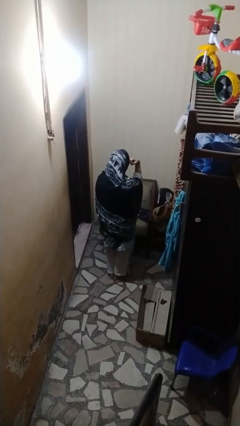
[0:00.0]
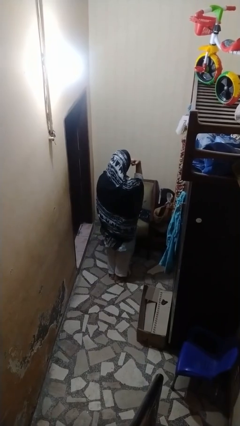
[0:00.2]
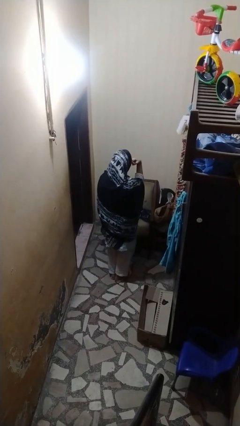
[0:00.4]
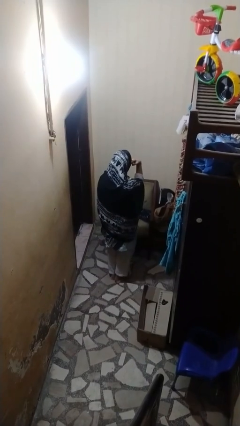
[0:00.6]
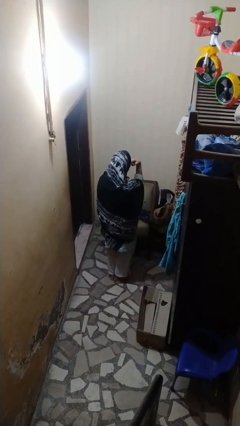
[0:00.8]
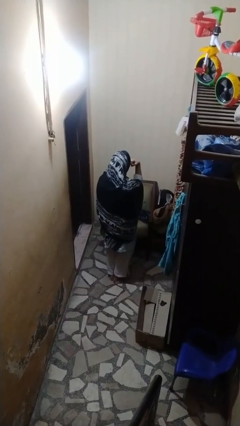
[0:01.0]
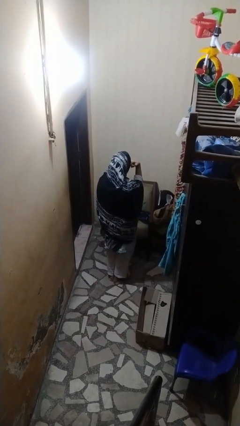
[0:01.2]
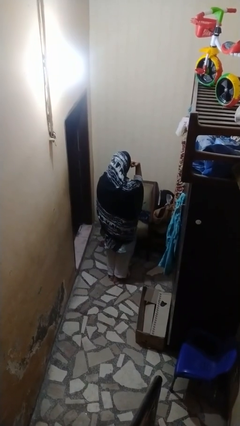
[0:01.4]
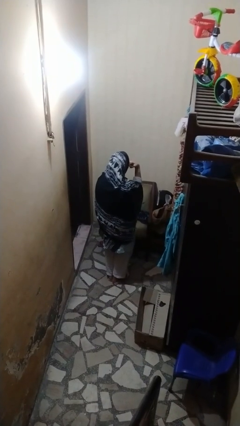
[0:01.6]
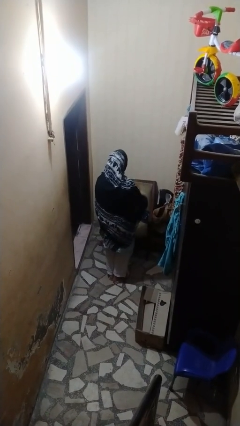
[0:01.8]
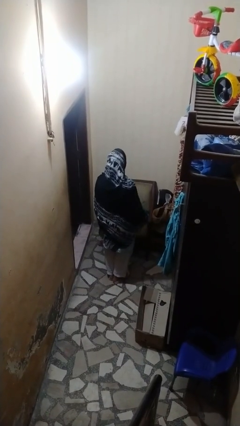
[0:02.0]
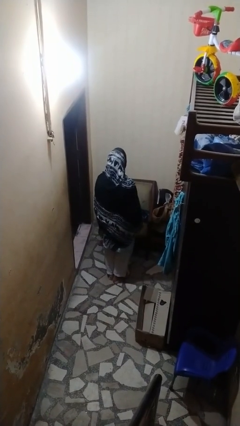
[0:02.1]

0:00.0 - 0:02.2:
person gestures watch closely

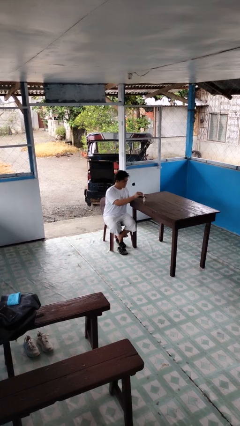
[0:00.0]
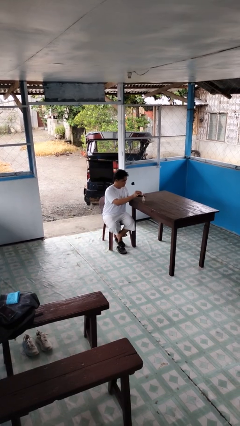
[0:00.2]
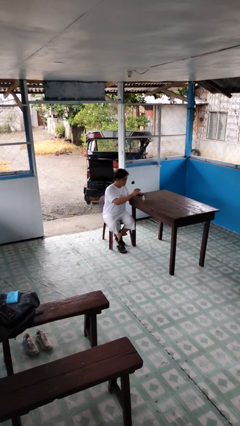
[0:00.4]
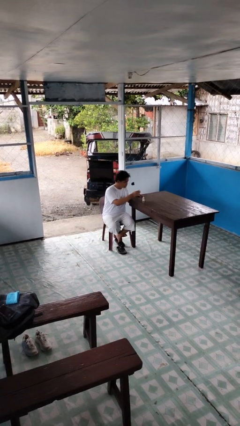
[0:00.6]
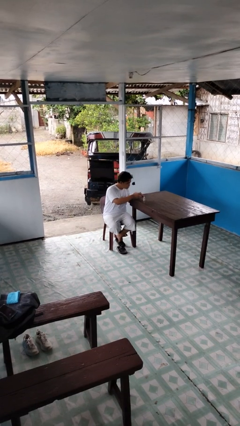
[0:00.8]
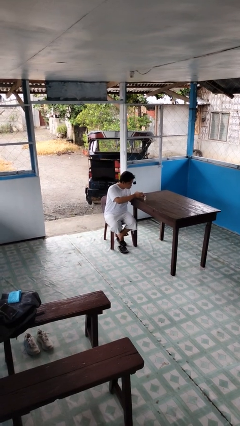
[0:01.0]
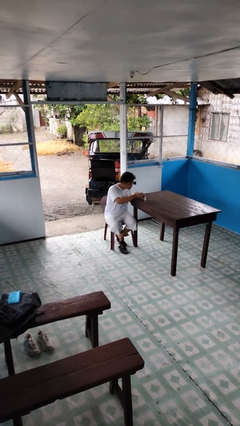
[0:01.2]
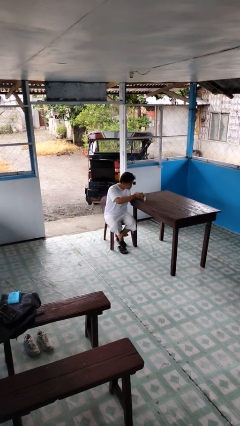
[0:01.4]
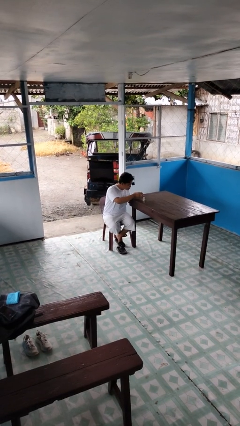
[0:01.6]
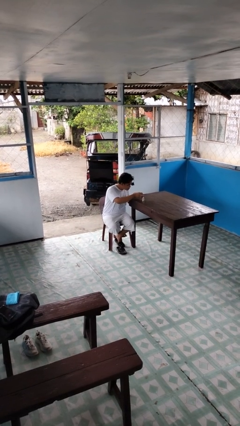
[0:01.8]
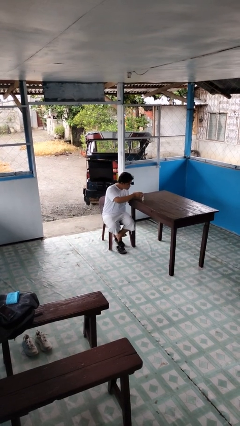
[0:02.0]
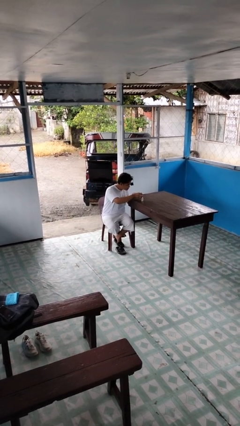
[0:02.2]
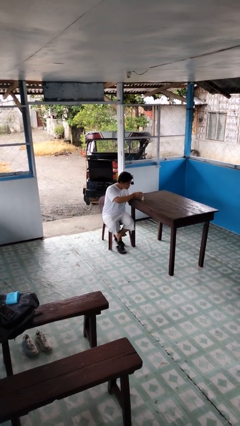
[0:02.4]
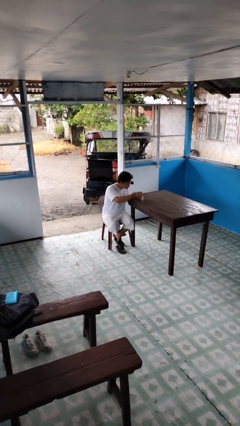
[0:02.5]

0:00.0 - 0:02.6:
person paints fingernails

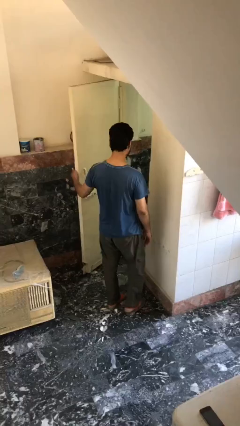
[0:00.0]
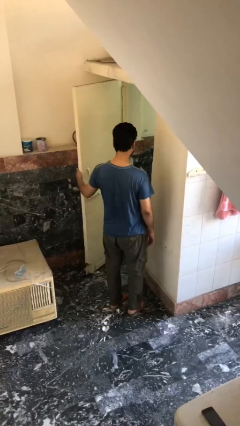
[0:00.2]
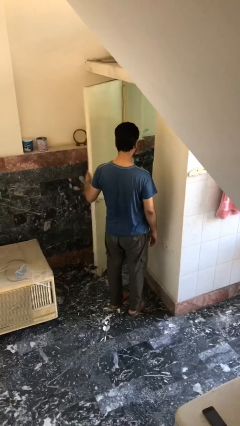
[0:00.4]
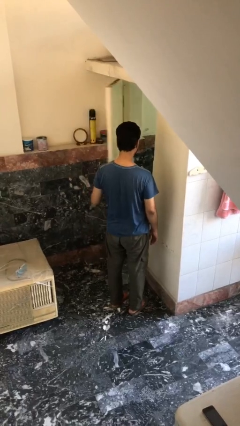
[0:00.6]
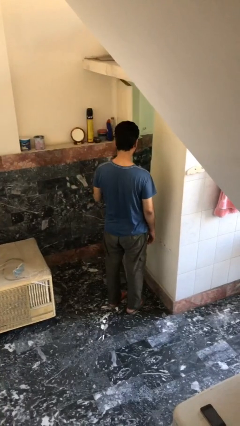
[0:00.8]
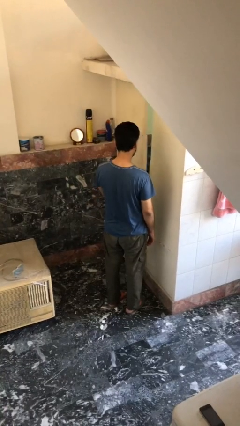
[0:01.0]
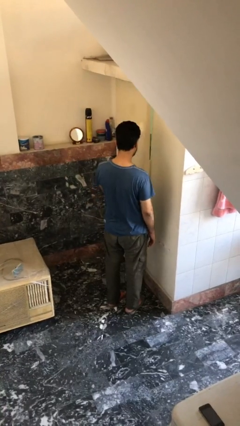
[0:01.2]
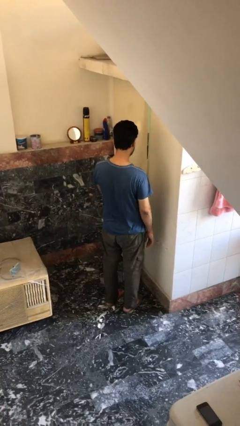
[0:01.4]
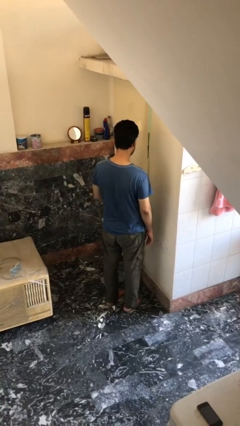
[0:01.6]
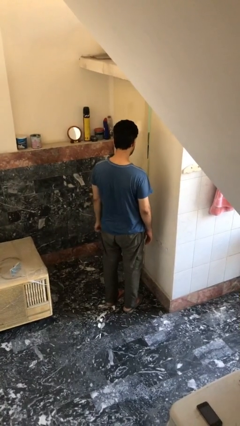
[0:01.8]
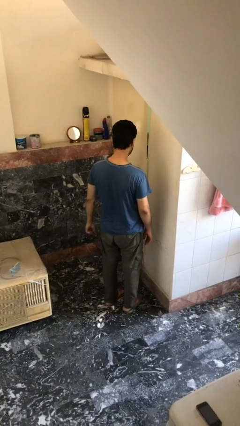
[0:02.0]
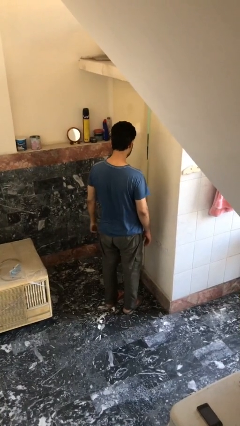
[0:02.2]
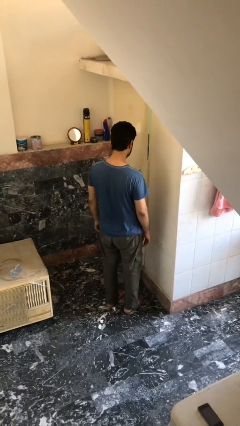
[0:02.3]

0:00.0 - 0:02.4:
person closes facility door

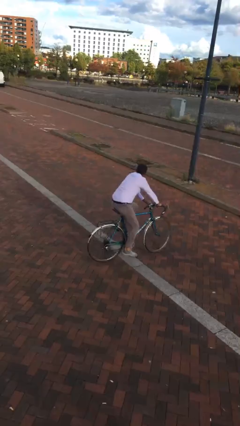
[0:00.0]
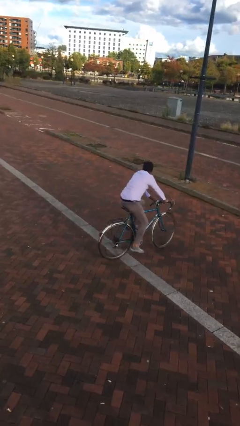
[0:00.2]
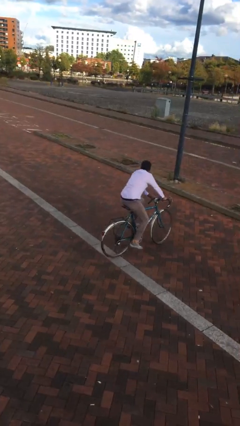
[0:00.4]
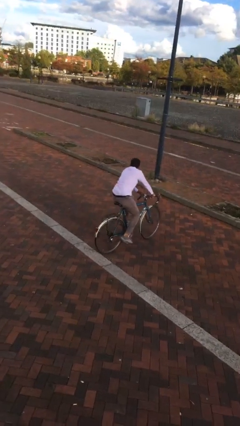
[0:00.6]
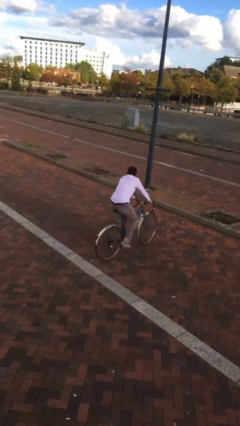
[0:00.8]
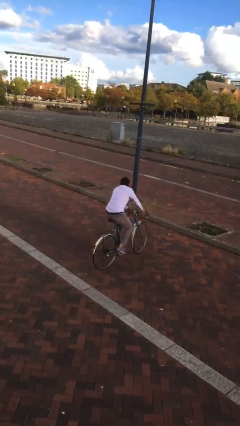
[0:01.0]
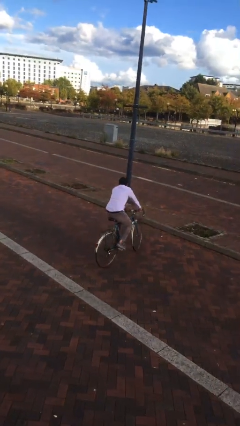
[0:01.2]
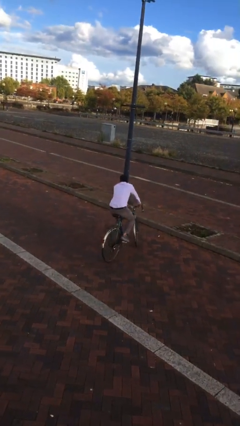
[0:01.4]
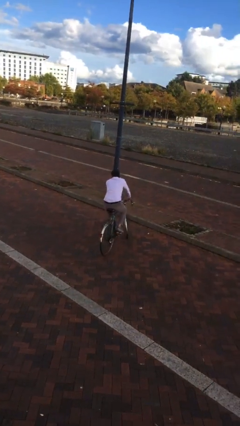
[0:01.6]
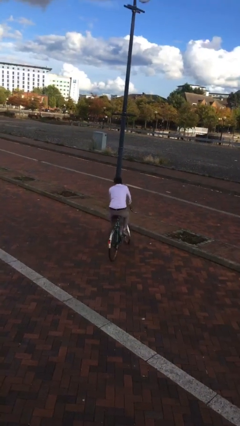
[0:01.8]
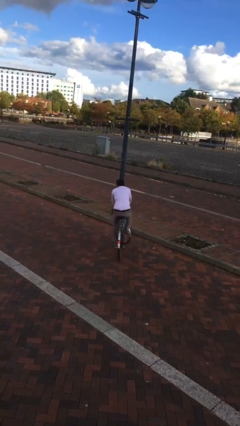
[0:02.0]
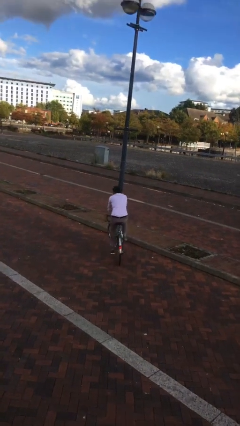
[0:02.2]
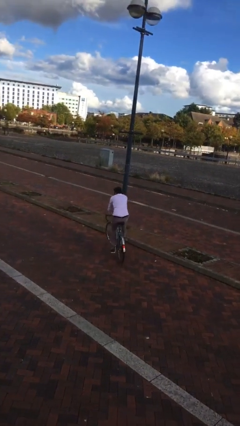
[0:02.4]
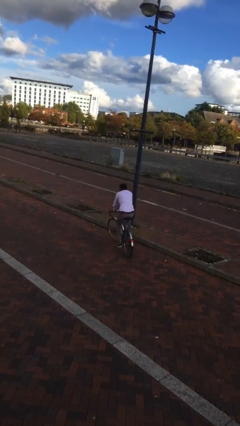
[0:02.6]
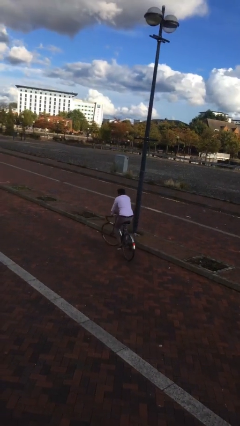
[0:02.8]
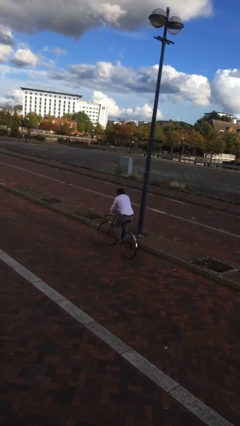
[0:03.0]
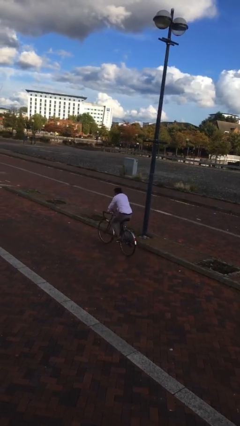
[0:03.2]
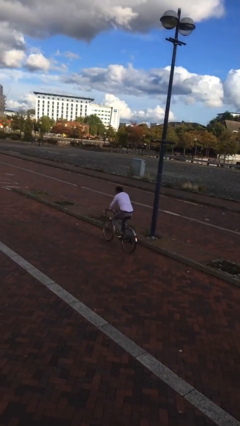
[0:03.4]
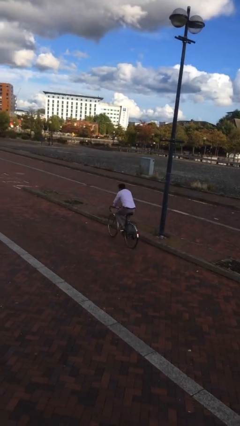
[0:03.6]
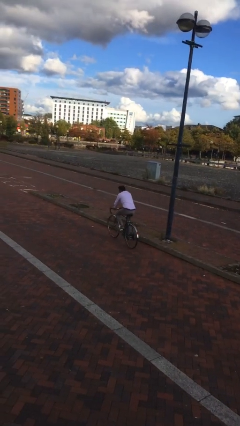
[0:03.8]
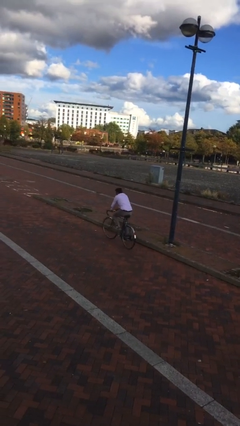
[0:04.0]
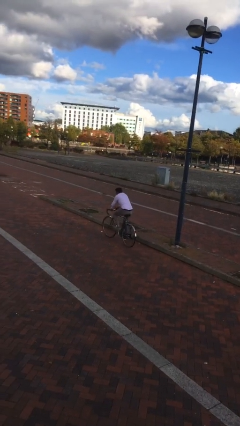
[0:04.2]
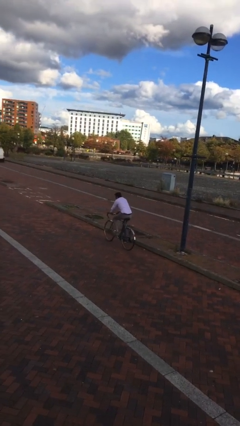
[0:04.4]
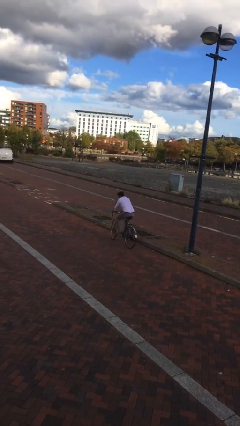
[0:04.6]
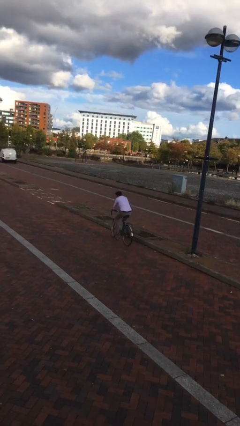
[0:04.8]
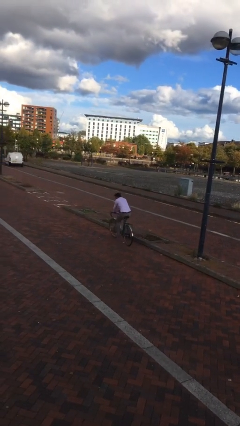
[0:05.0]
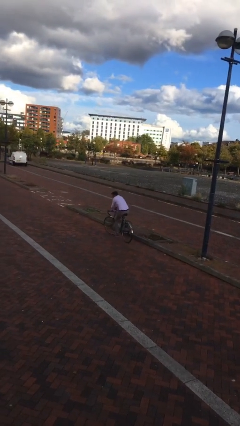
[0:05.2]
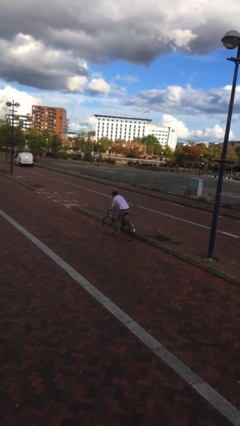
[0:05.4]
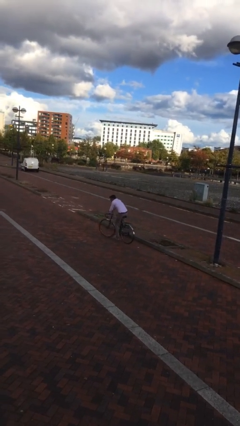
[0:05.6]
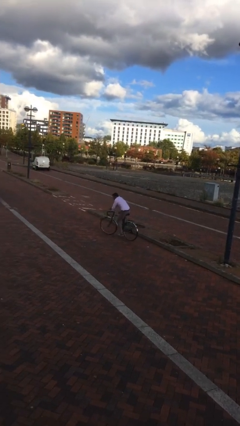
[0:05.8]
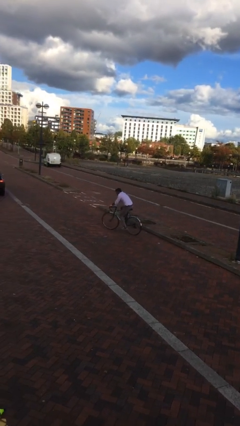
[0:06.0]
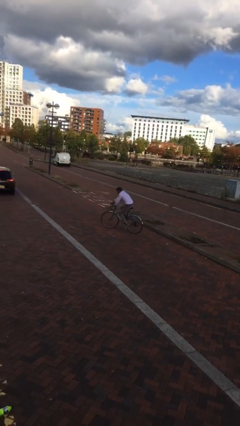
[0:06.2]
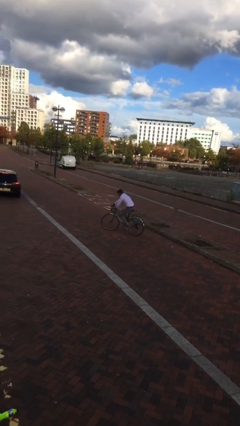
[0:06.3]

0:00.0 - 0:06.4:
person rides bicycle

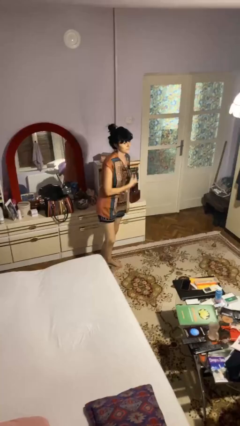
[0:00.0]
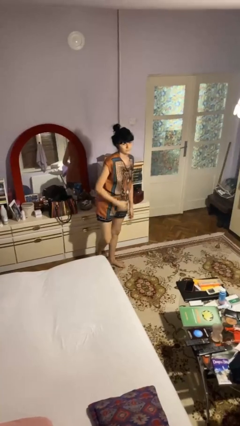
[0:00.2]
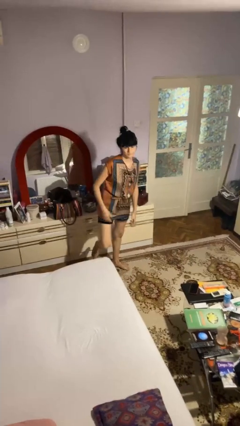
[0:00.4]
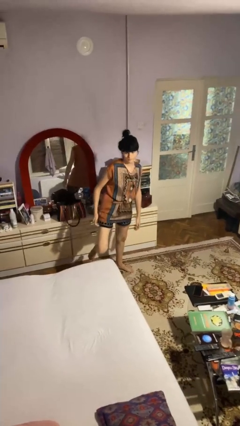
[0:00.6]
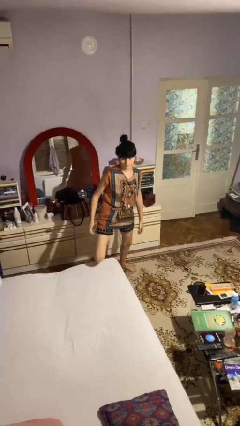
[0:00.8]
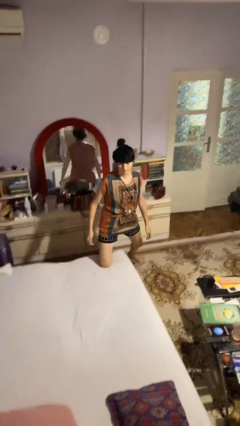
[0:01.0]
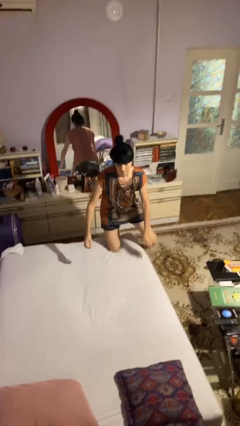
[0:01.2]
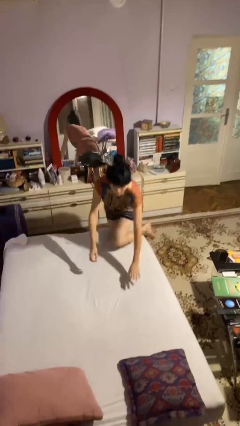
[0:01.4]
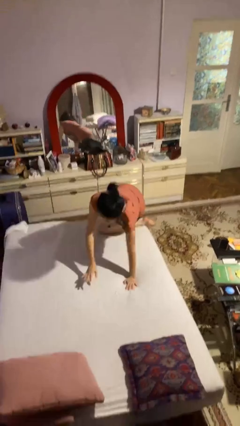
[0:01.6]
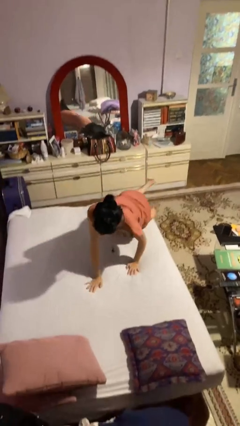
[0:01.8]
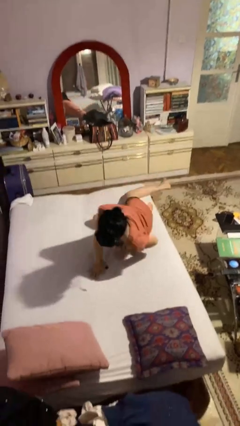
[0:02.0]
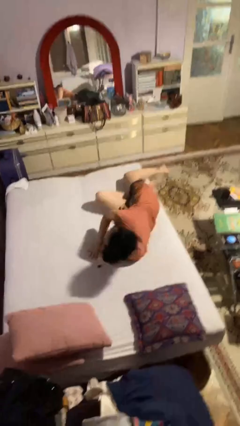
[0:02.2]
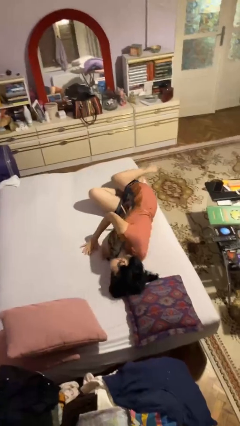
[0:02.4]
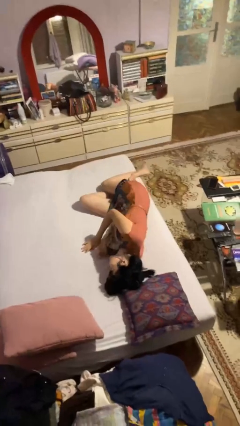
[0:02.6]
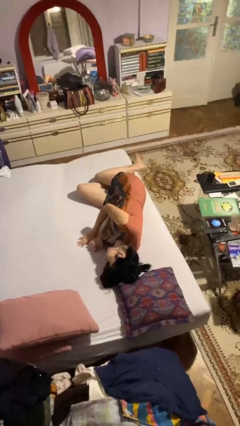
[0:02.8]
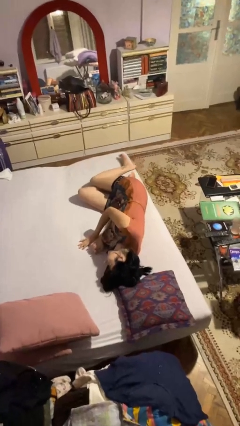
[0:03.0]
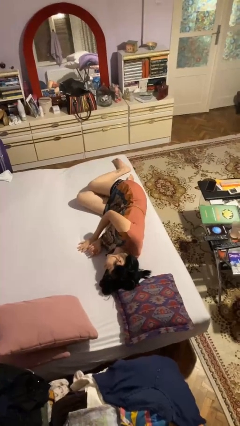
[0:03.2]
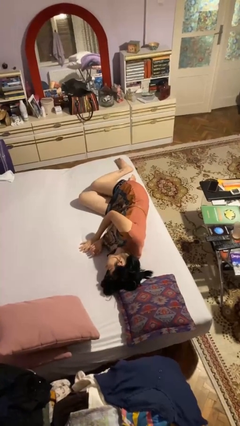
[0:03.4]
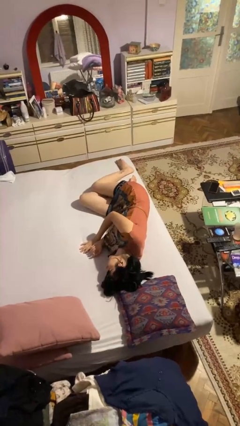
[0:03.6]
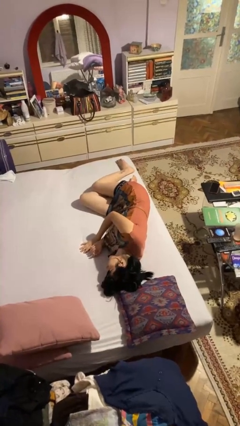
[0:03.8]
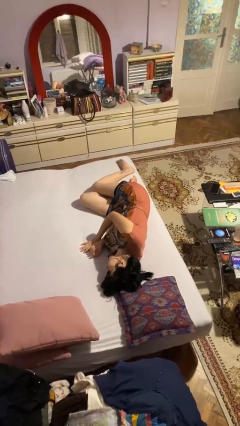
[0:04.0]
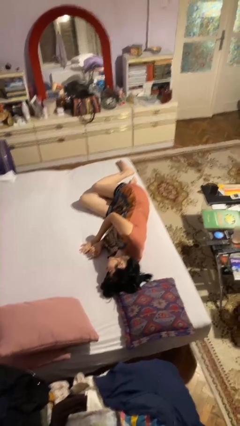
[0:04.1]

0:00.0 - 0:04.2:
person lies down on bed
